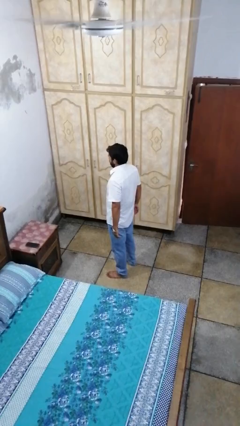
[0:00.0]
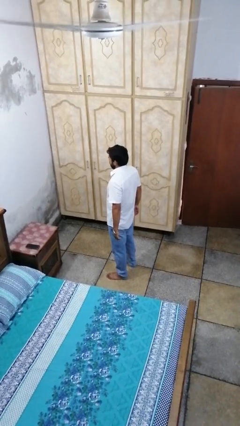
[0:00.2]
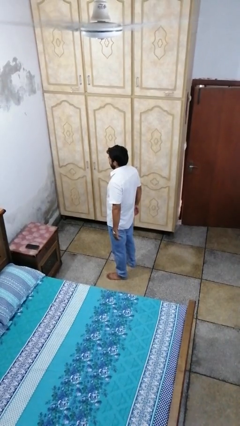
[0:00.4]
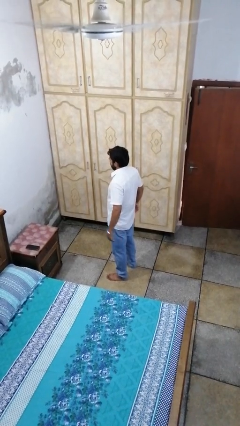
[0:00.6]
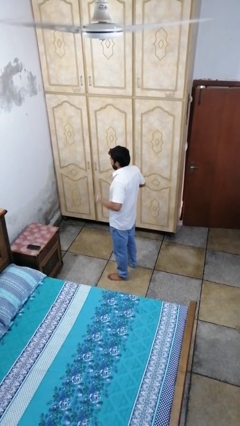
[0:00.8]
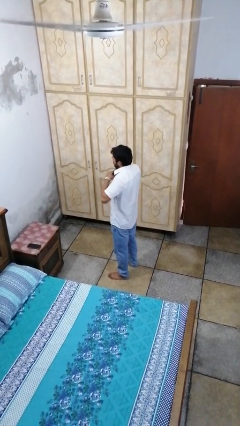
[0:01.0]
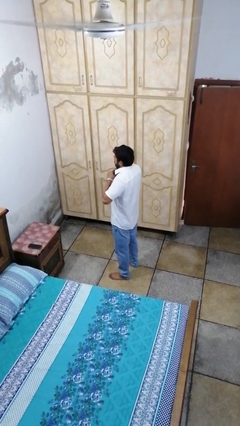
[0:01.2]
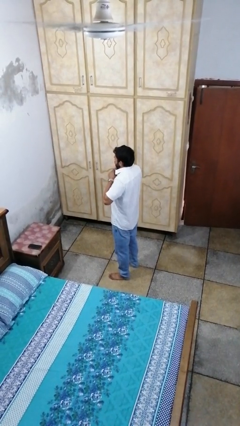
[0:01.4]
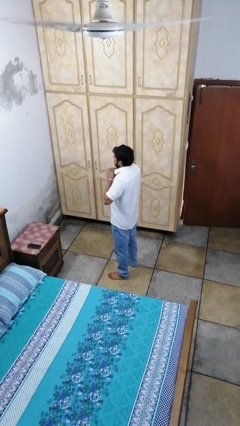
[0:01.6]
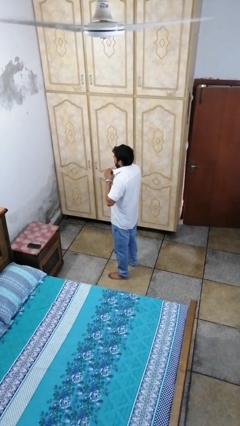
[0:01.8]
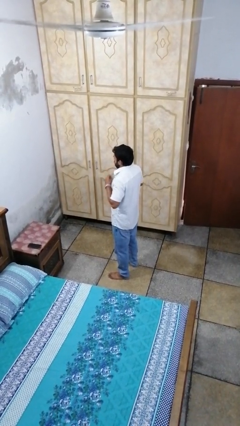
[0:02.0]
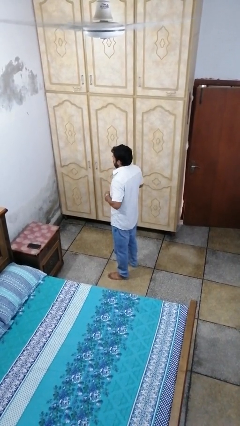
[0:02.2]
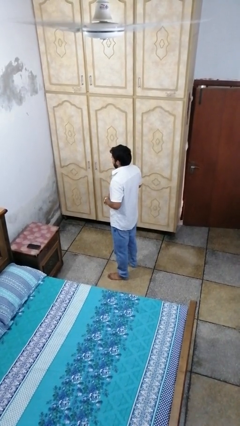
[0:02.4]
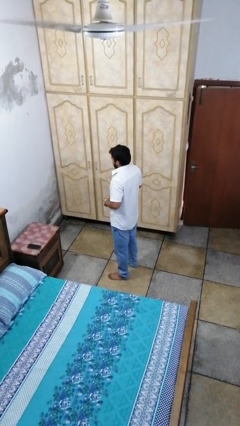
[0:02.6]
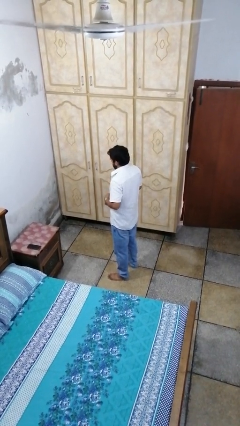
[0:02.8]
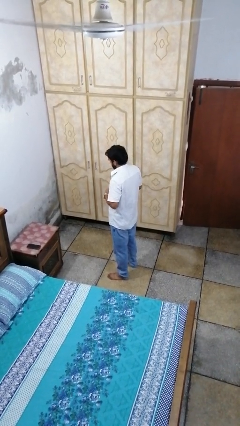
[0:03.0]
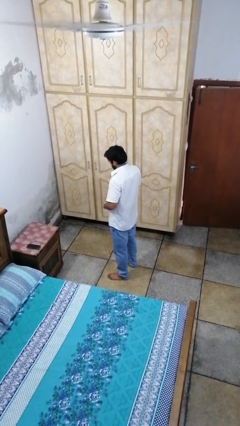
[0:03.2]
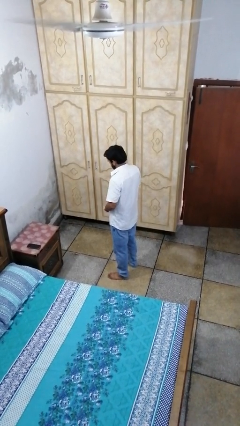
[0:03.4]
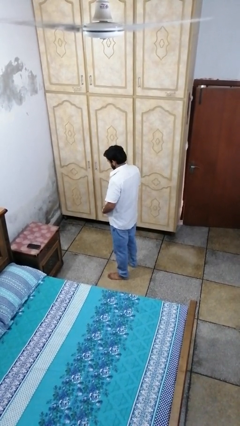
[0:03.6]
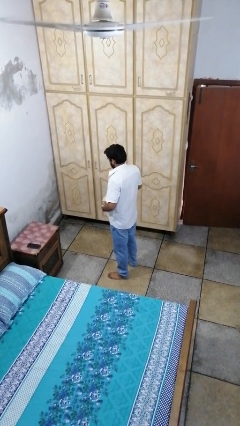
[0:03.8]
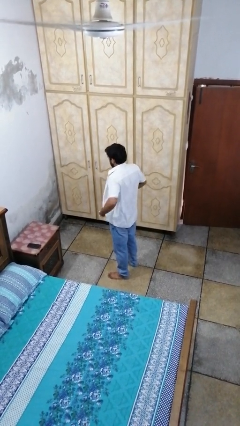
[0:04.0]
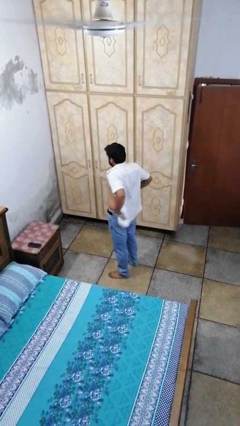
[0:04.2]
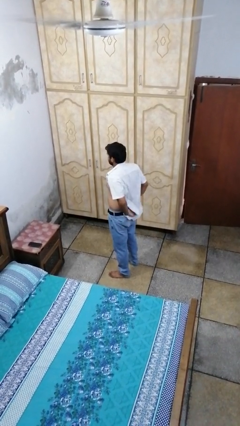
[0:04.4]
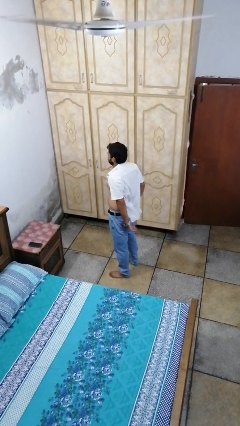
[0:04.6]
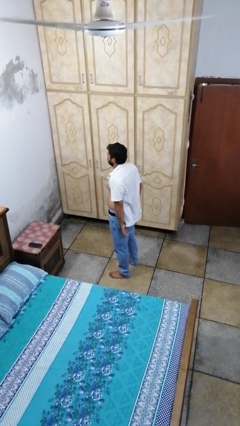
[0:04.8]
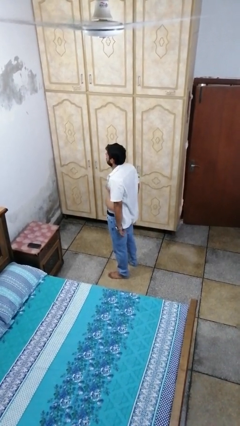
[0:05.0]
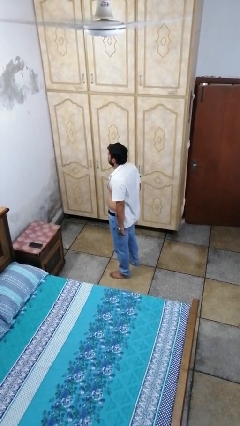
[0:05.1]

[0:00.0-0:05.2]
person unbuttons shirt

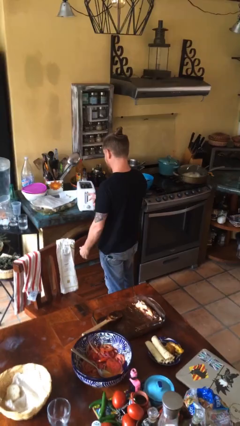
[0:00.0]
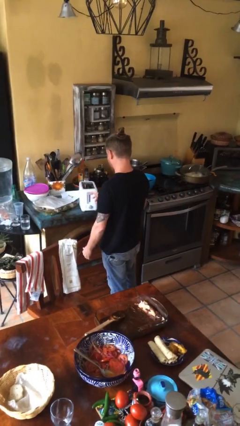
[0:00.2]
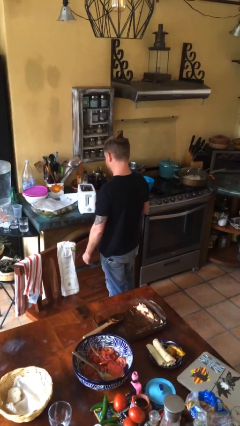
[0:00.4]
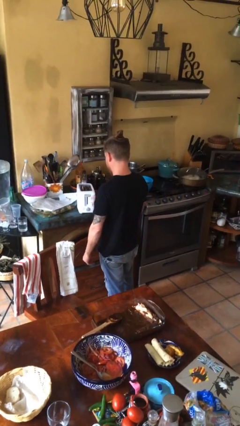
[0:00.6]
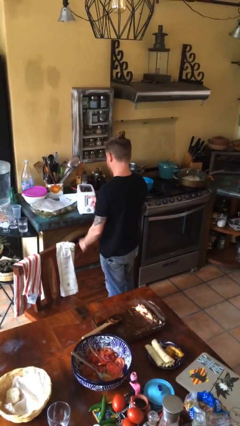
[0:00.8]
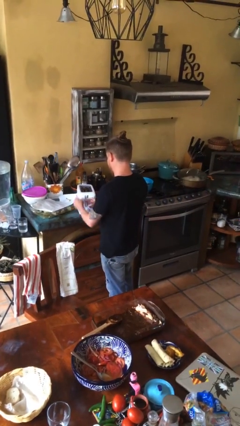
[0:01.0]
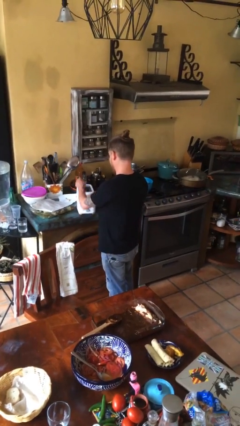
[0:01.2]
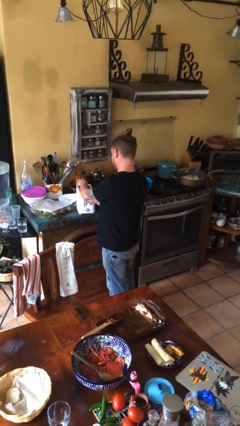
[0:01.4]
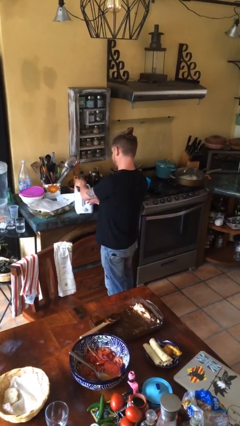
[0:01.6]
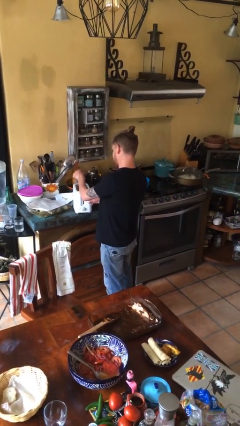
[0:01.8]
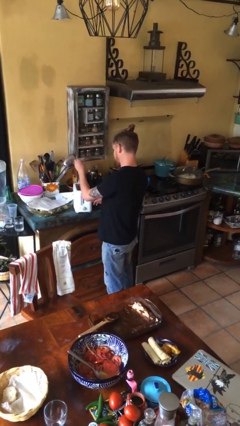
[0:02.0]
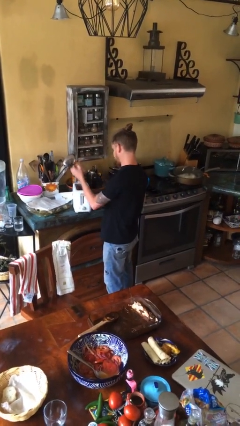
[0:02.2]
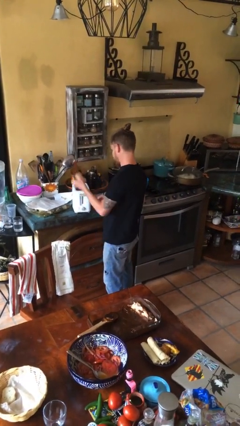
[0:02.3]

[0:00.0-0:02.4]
person takes object from toaster

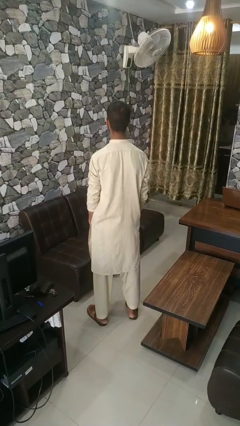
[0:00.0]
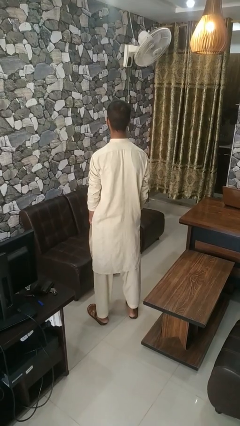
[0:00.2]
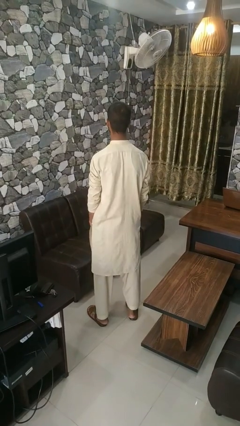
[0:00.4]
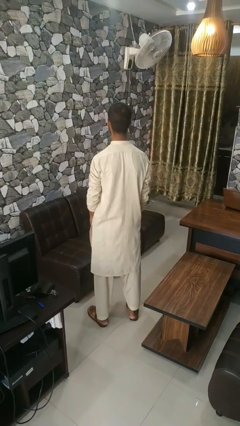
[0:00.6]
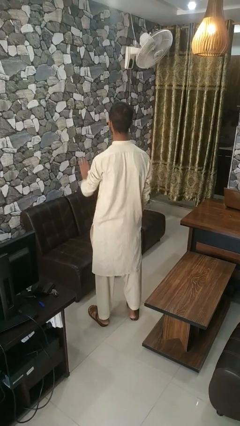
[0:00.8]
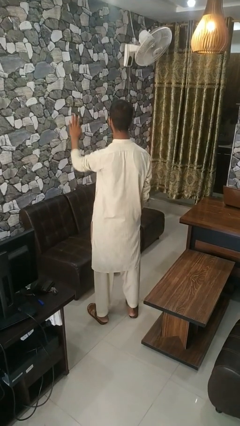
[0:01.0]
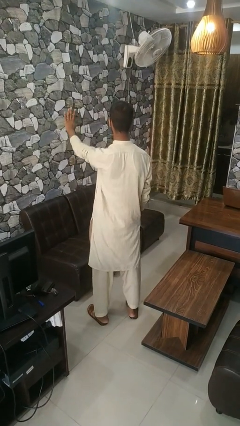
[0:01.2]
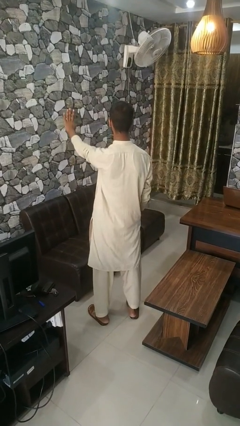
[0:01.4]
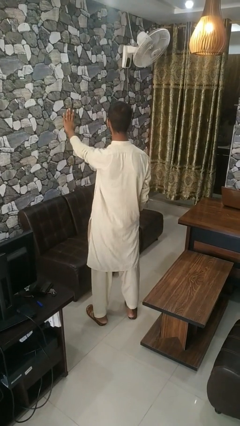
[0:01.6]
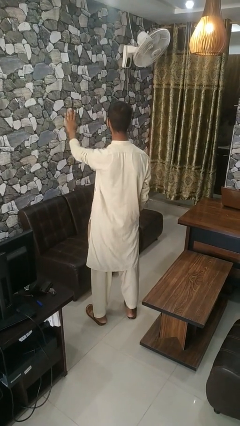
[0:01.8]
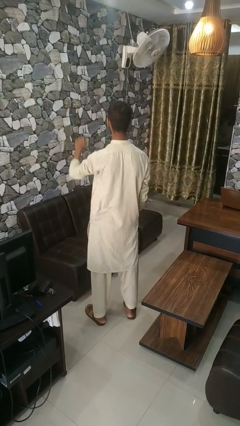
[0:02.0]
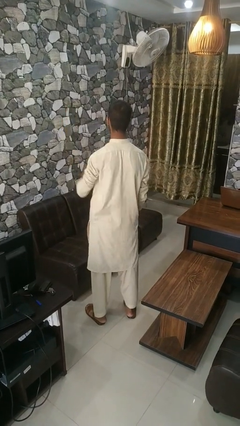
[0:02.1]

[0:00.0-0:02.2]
person gestures number four

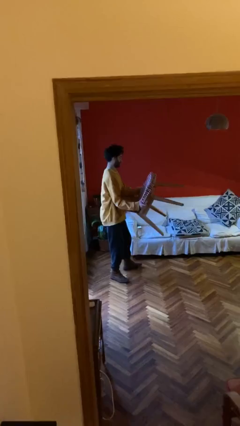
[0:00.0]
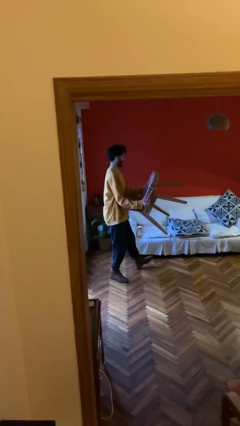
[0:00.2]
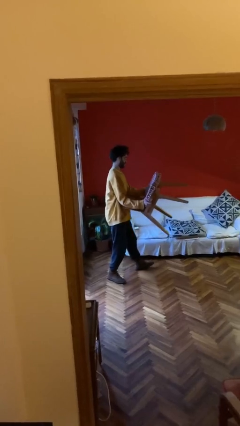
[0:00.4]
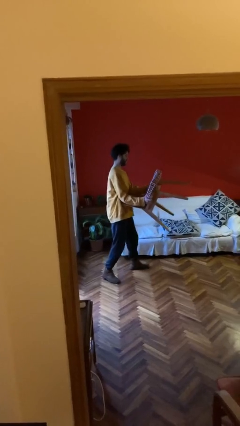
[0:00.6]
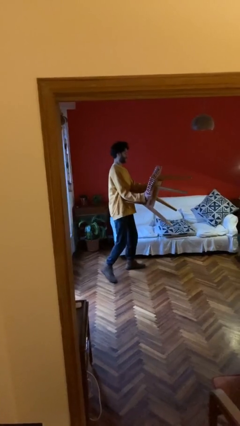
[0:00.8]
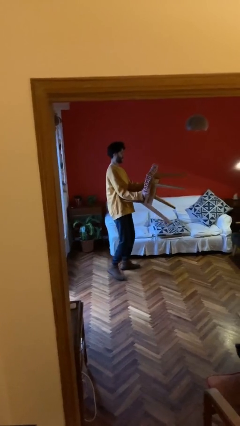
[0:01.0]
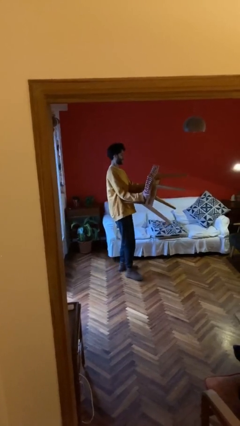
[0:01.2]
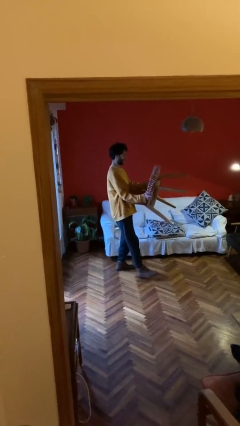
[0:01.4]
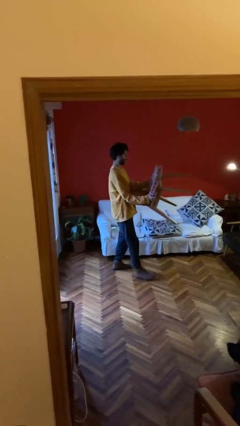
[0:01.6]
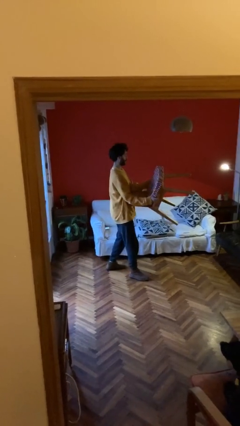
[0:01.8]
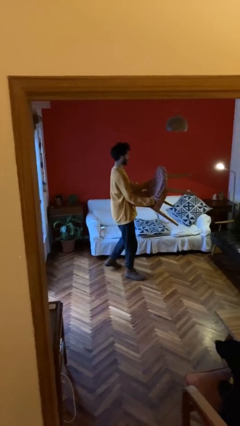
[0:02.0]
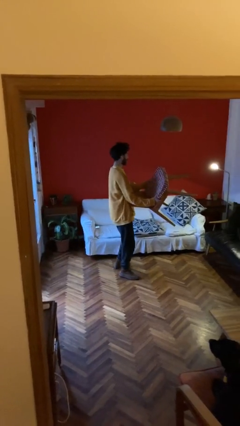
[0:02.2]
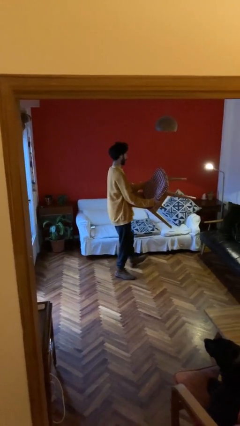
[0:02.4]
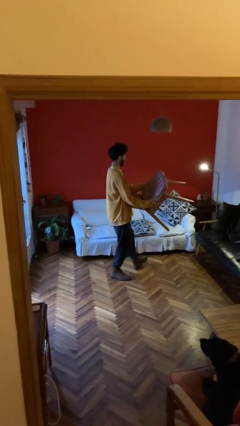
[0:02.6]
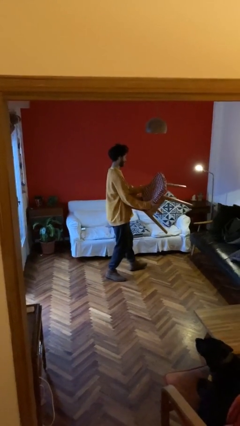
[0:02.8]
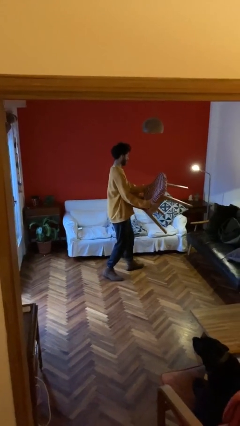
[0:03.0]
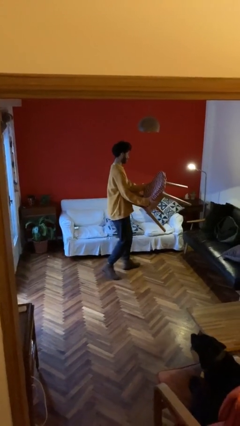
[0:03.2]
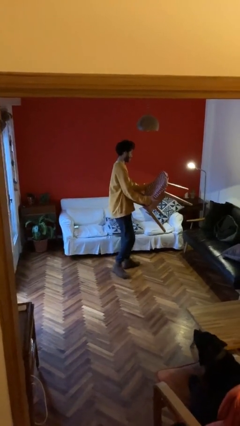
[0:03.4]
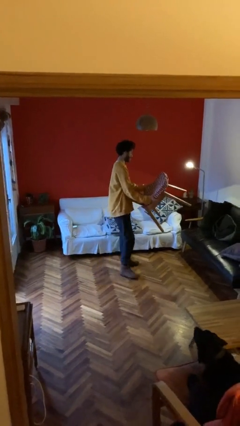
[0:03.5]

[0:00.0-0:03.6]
person carries heavy object

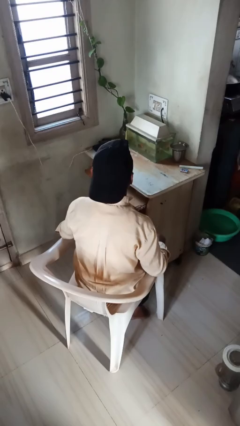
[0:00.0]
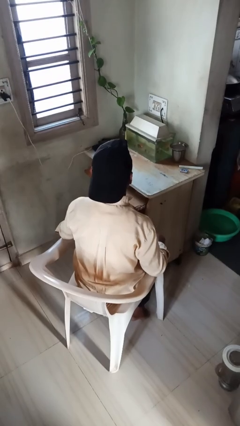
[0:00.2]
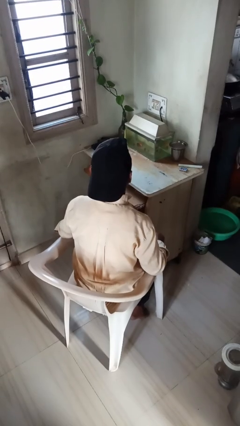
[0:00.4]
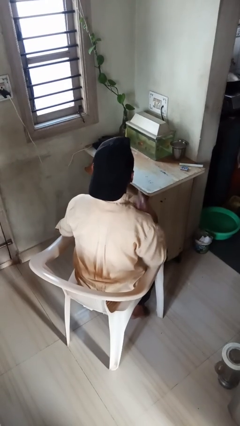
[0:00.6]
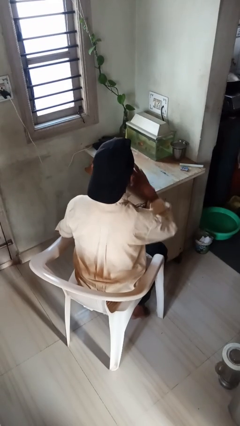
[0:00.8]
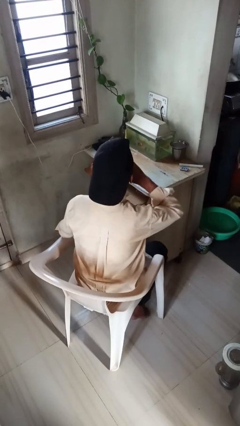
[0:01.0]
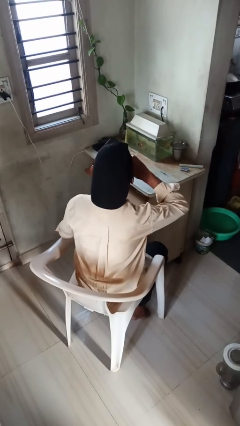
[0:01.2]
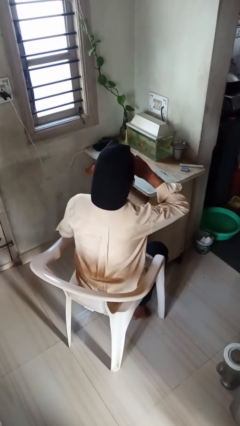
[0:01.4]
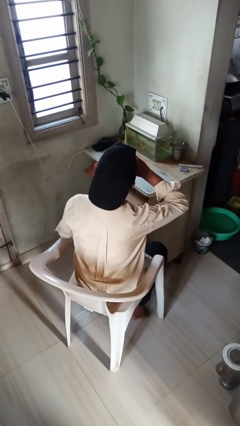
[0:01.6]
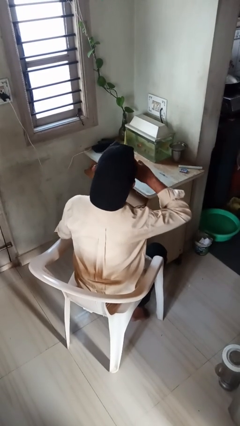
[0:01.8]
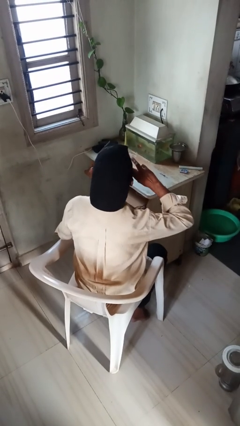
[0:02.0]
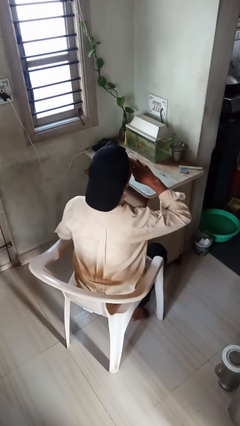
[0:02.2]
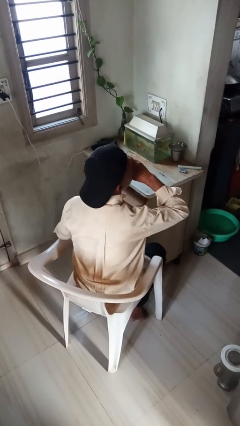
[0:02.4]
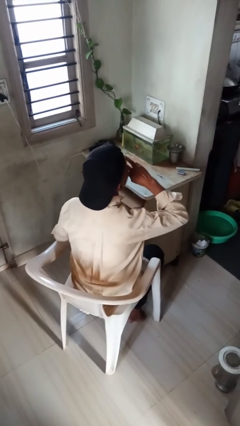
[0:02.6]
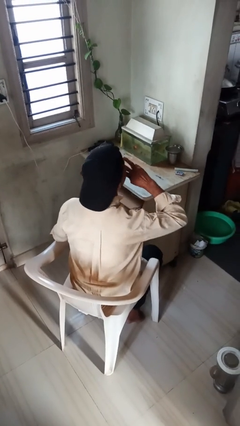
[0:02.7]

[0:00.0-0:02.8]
person licks fingers

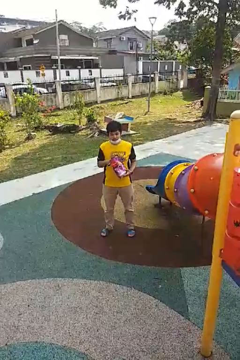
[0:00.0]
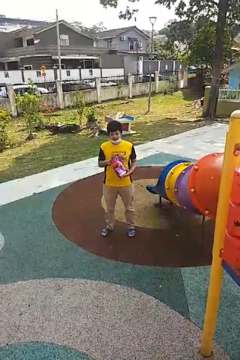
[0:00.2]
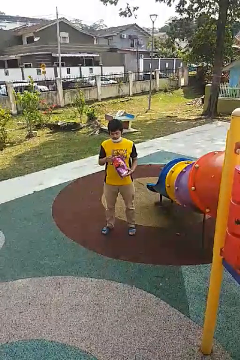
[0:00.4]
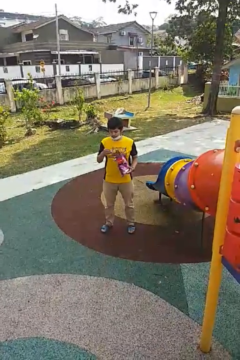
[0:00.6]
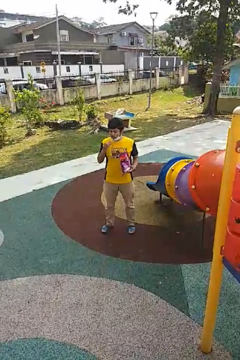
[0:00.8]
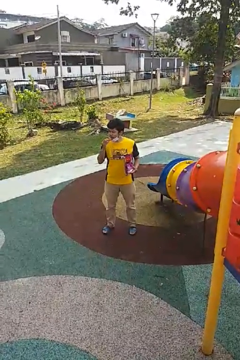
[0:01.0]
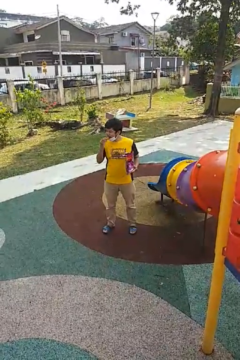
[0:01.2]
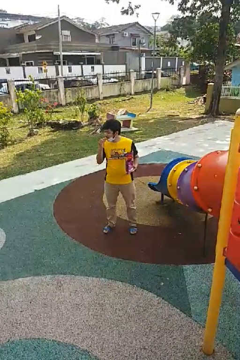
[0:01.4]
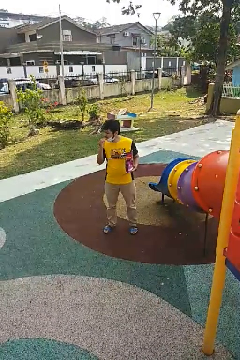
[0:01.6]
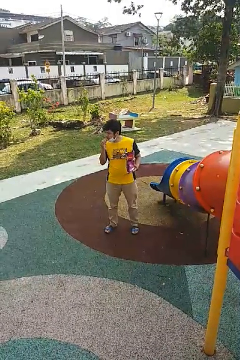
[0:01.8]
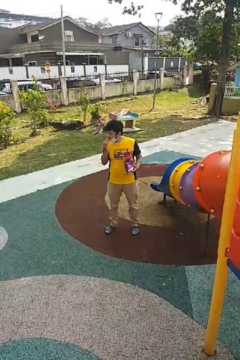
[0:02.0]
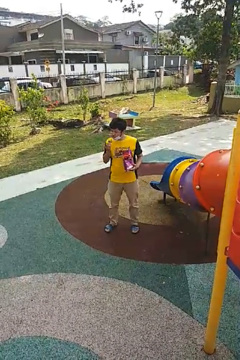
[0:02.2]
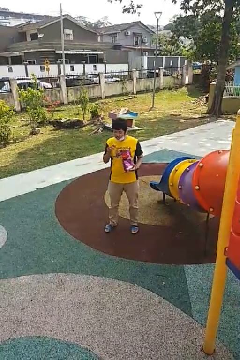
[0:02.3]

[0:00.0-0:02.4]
person eats snack from bag
